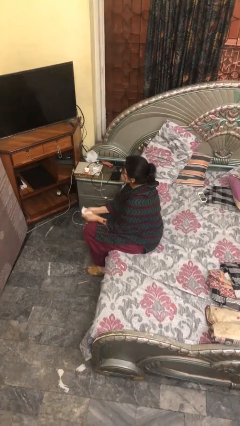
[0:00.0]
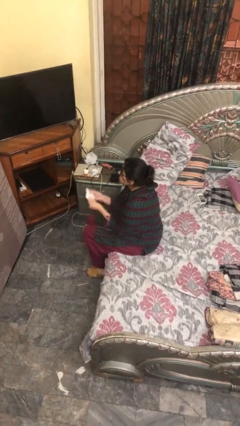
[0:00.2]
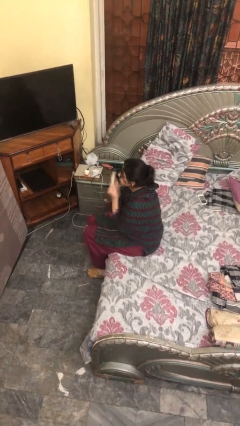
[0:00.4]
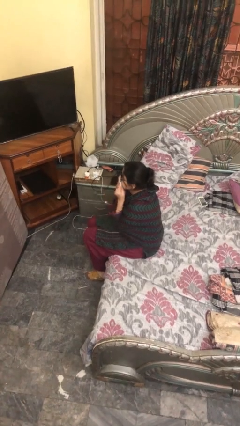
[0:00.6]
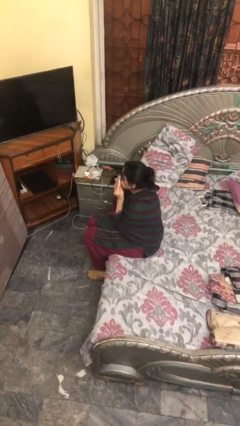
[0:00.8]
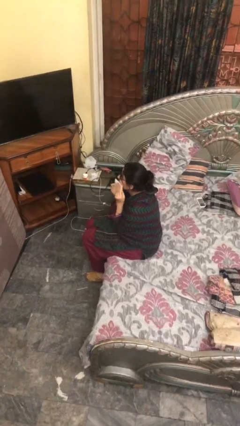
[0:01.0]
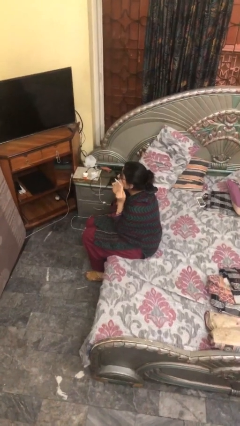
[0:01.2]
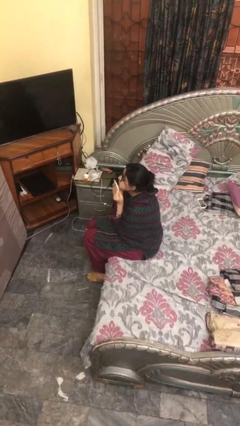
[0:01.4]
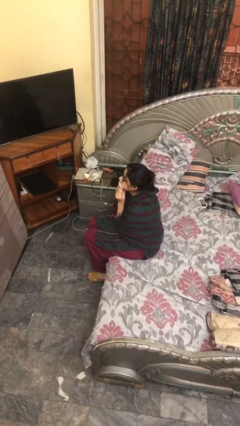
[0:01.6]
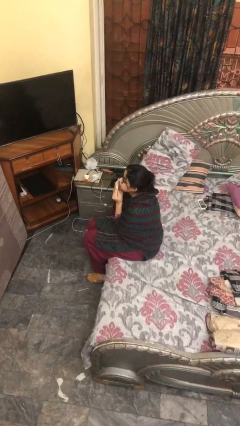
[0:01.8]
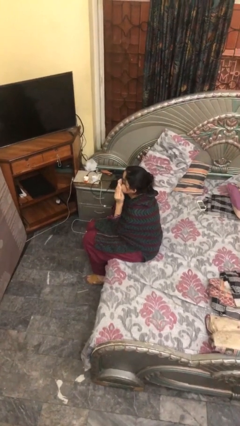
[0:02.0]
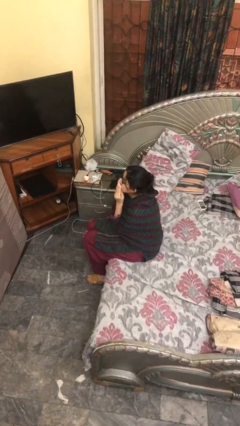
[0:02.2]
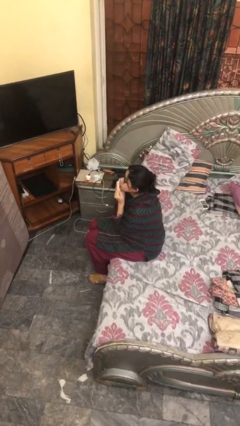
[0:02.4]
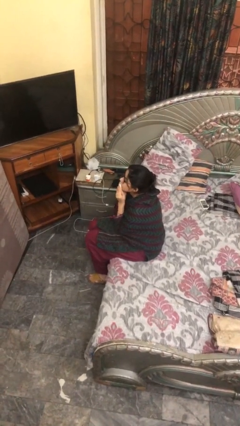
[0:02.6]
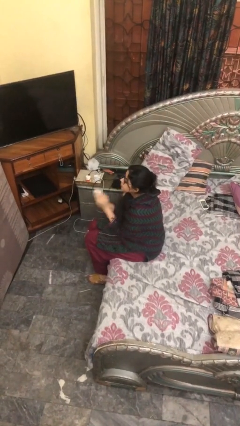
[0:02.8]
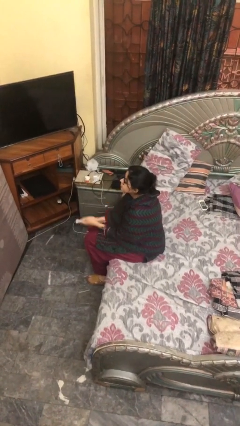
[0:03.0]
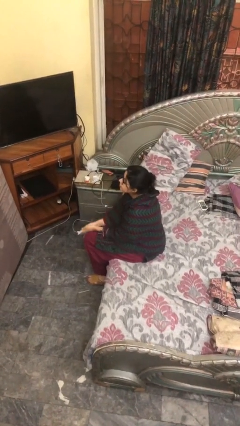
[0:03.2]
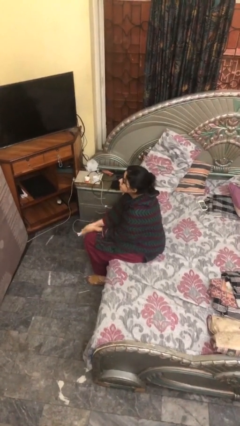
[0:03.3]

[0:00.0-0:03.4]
person wipes mouth with napkin

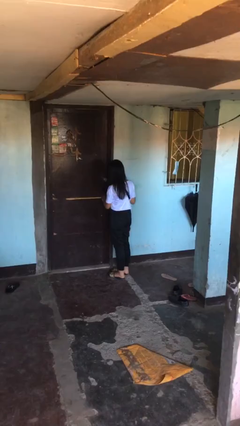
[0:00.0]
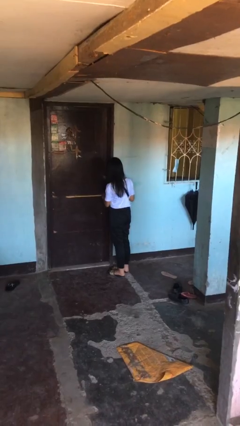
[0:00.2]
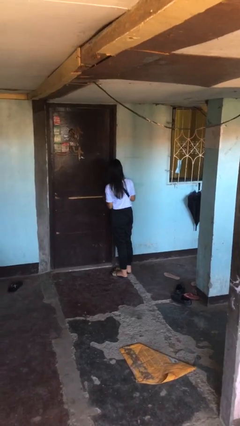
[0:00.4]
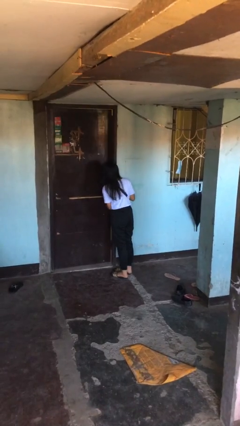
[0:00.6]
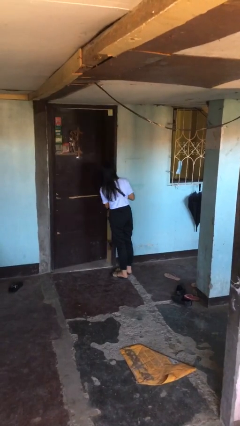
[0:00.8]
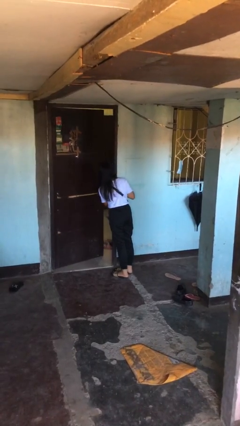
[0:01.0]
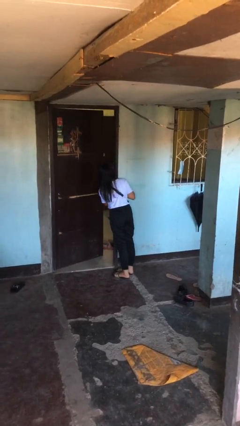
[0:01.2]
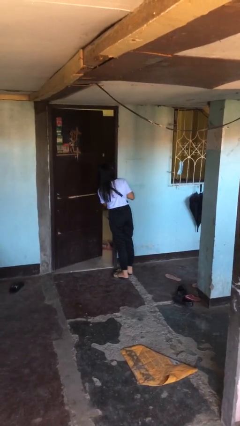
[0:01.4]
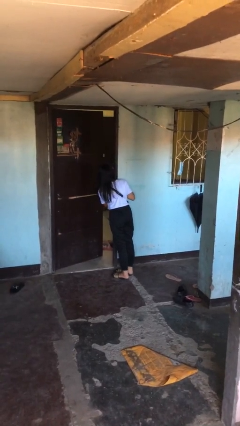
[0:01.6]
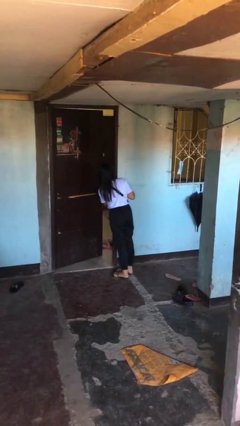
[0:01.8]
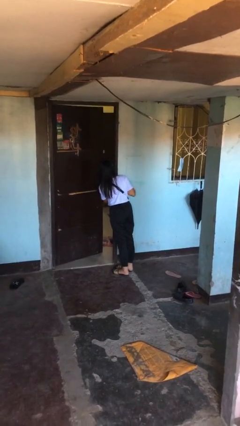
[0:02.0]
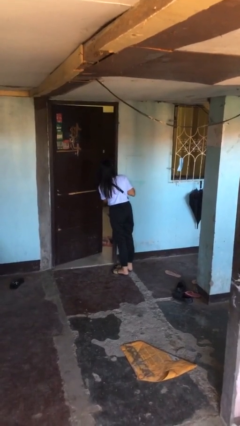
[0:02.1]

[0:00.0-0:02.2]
person opens facility door

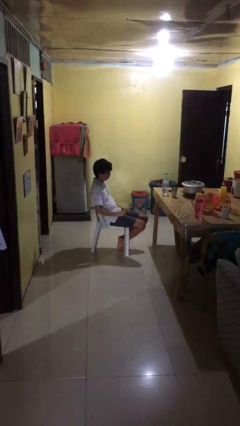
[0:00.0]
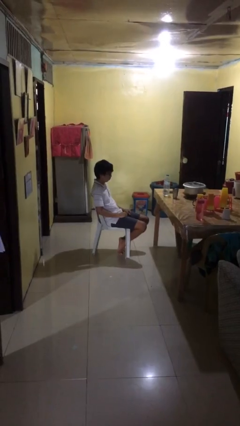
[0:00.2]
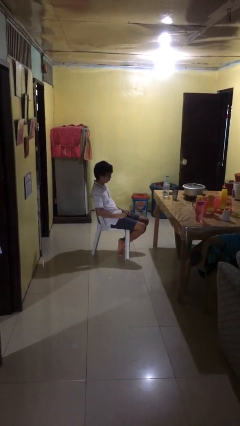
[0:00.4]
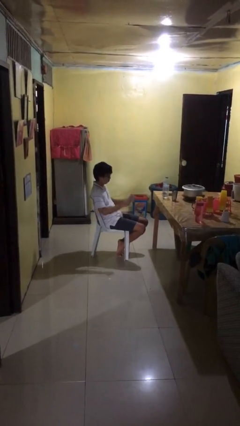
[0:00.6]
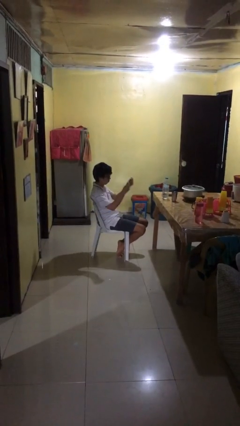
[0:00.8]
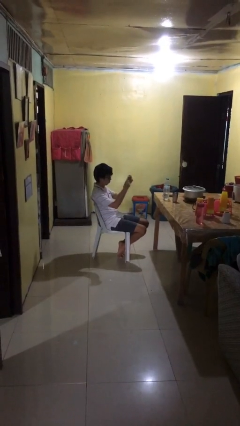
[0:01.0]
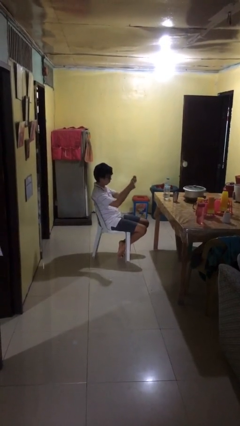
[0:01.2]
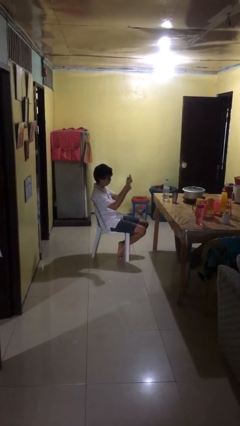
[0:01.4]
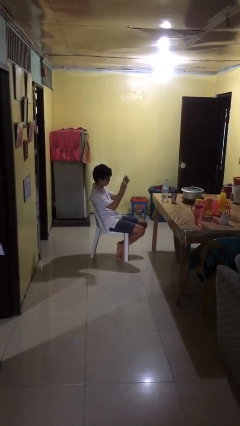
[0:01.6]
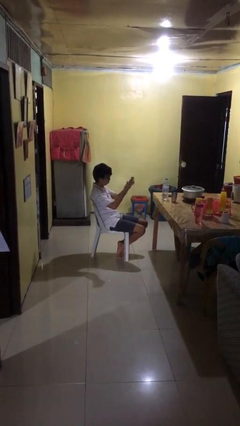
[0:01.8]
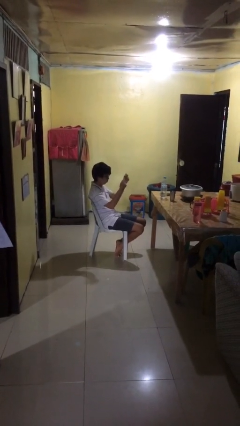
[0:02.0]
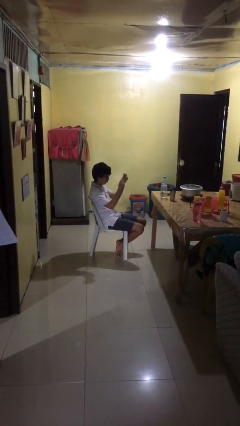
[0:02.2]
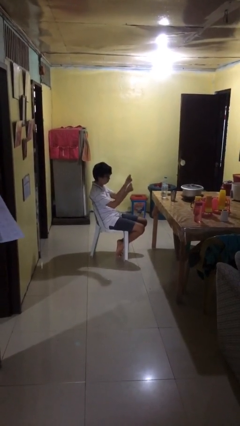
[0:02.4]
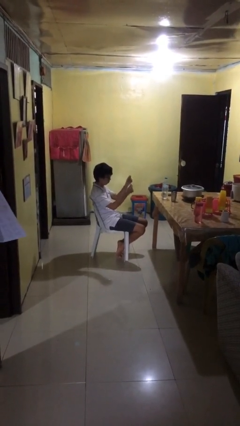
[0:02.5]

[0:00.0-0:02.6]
person snaps fingers

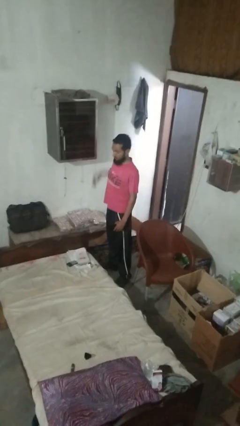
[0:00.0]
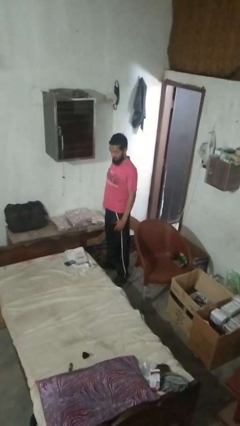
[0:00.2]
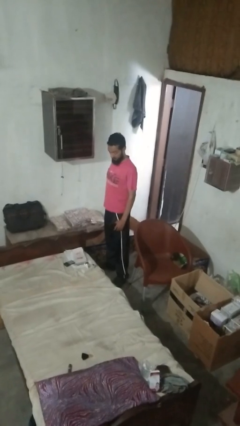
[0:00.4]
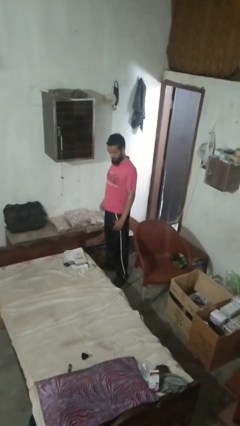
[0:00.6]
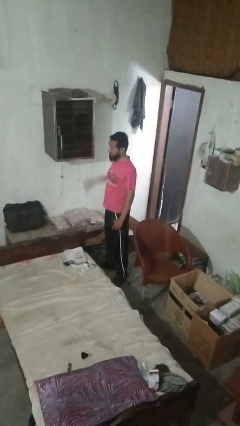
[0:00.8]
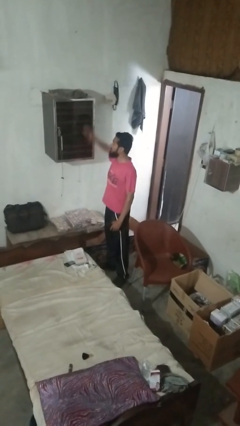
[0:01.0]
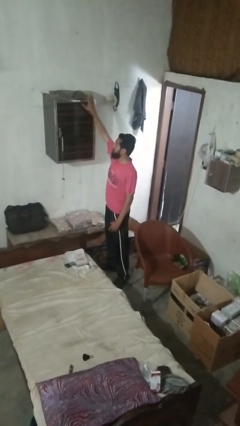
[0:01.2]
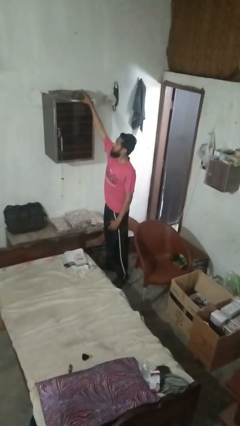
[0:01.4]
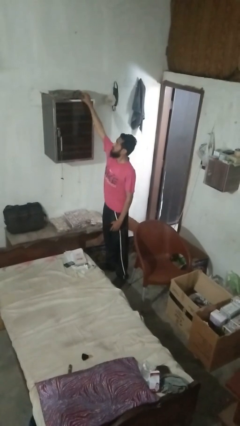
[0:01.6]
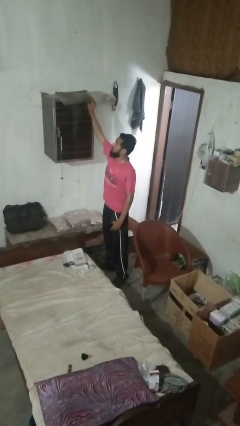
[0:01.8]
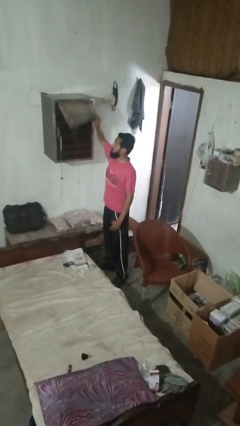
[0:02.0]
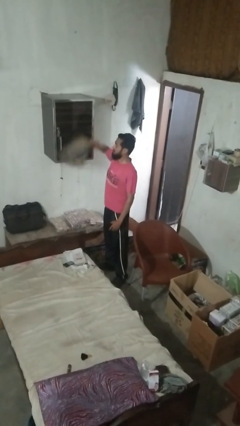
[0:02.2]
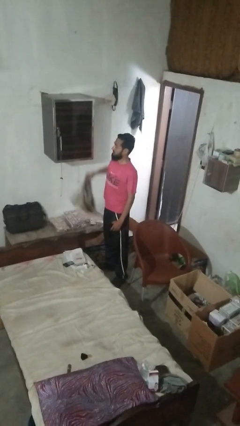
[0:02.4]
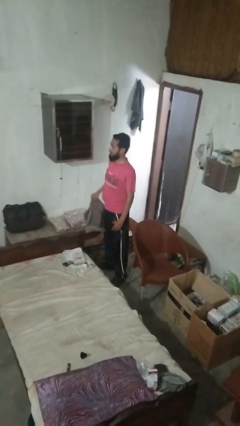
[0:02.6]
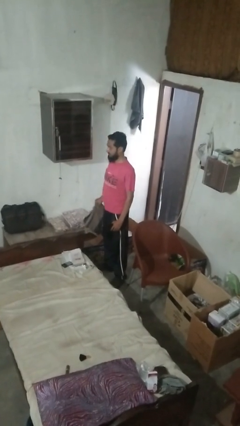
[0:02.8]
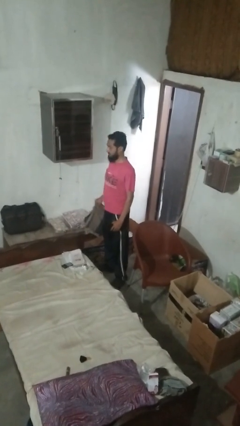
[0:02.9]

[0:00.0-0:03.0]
person picks up object from shelf

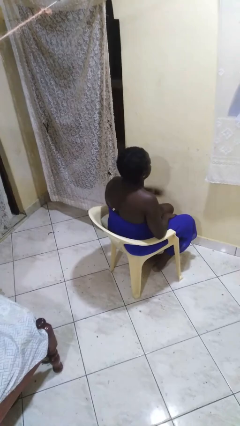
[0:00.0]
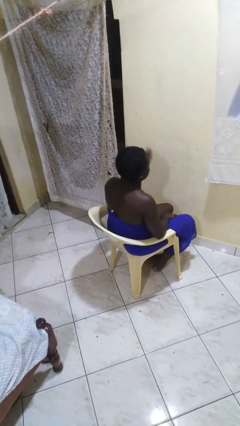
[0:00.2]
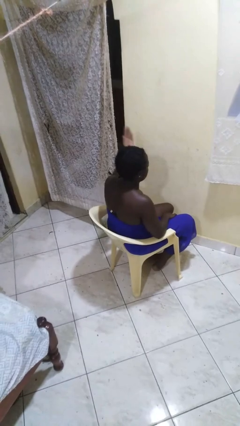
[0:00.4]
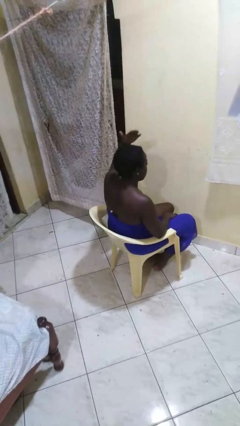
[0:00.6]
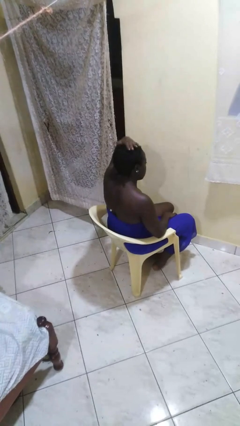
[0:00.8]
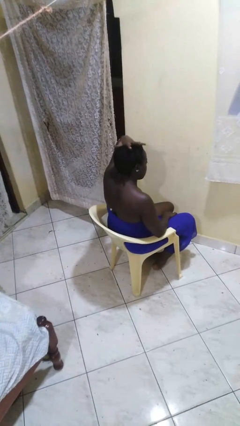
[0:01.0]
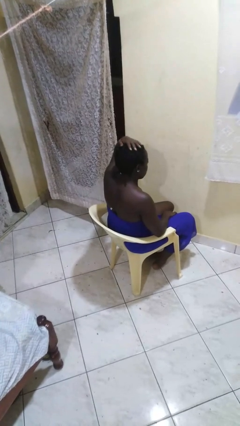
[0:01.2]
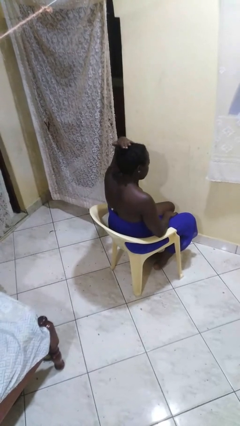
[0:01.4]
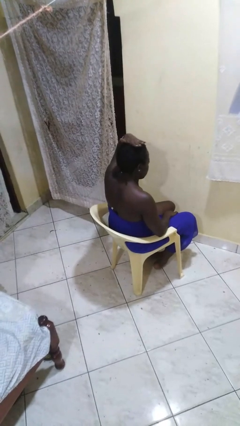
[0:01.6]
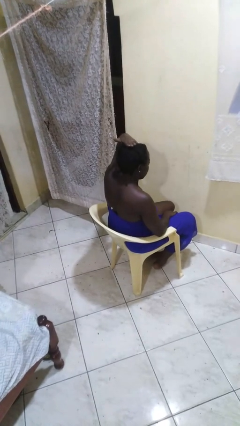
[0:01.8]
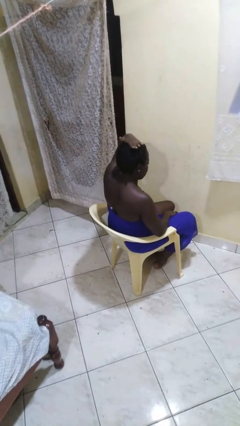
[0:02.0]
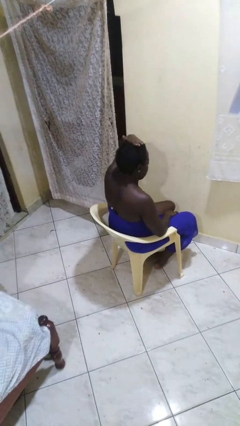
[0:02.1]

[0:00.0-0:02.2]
person pats head

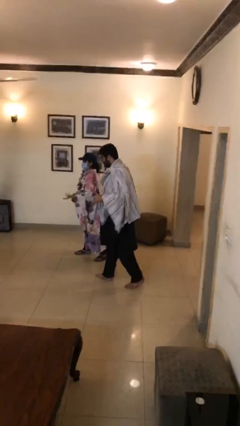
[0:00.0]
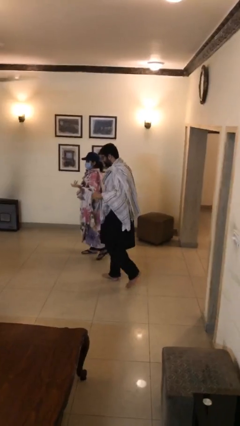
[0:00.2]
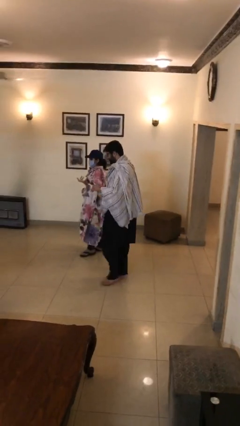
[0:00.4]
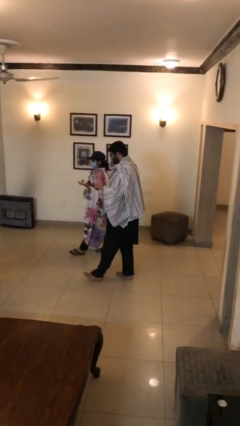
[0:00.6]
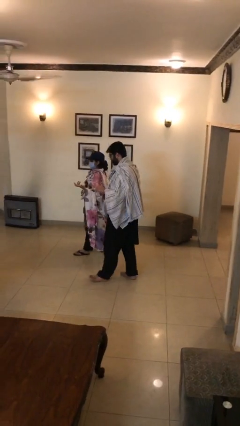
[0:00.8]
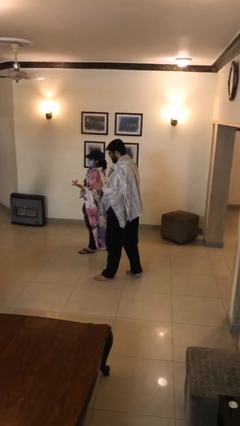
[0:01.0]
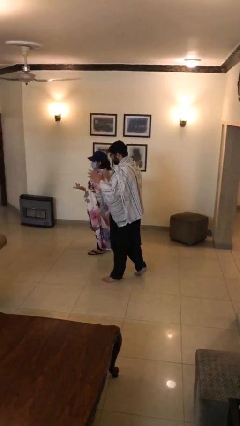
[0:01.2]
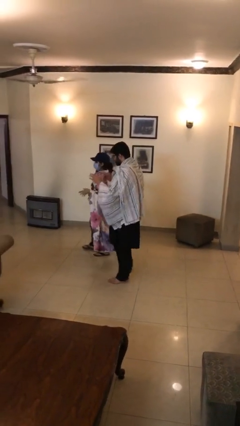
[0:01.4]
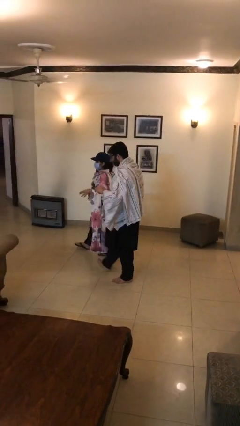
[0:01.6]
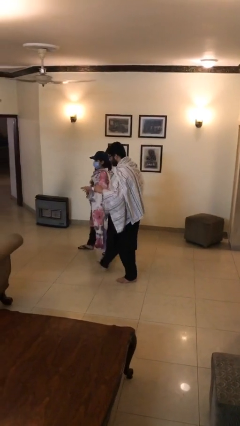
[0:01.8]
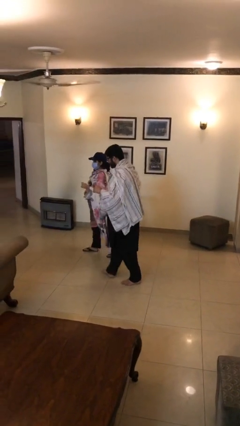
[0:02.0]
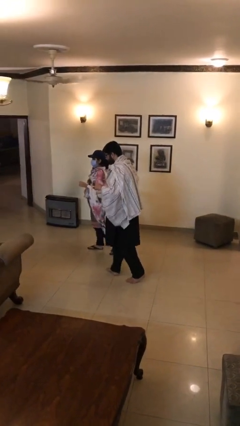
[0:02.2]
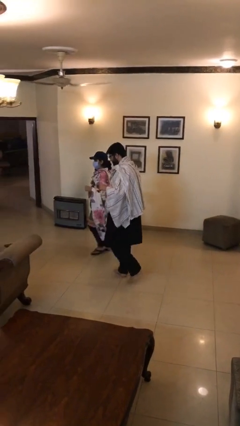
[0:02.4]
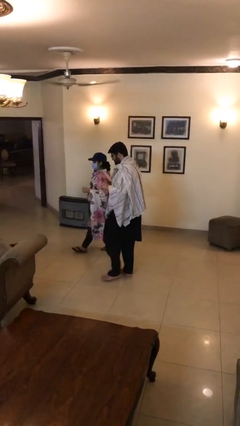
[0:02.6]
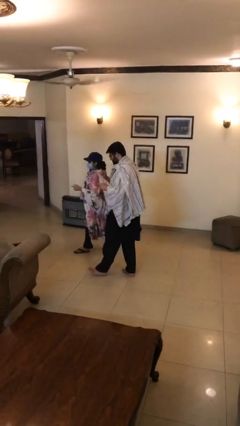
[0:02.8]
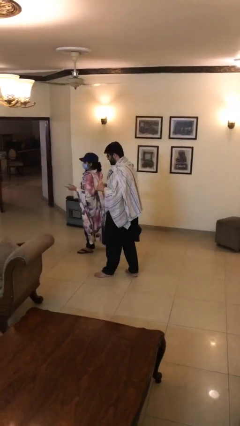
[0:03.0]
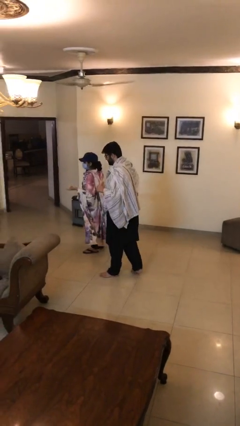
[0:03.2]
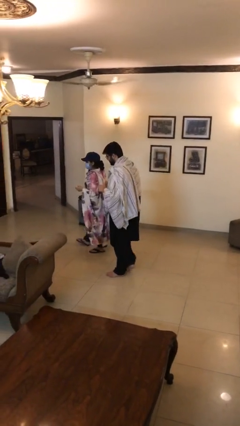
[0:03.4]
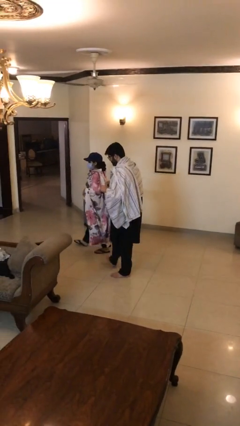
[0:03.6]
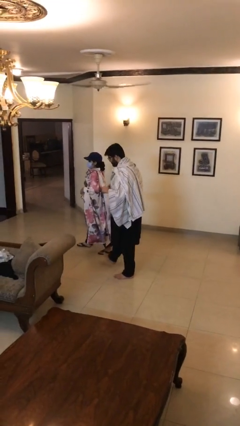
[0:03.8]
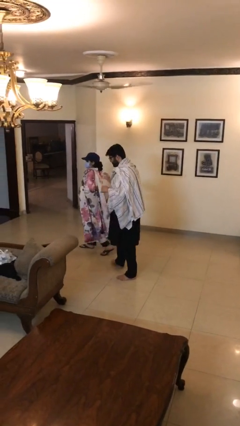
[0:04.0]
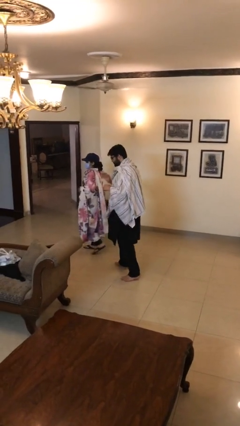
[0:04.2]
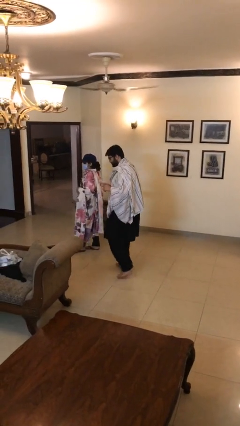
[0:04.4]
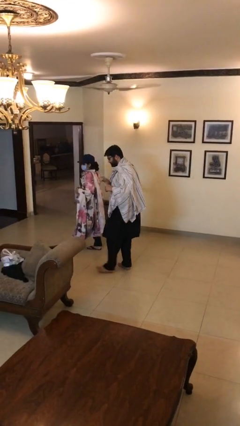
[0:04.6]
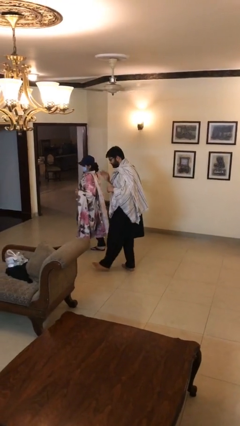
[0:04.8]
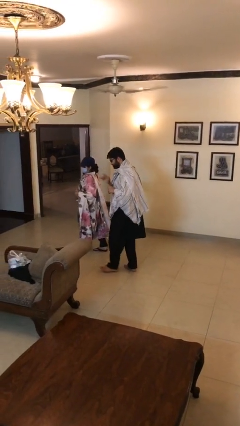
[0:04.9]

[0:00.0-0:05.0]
person talks to person
